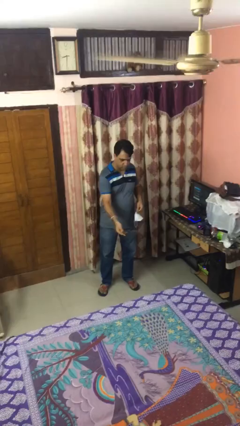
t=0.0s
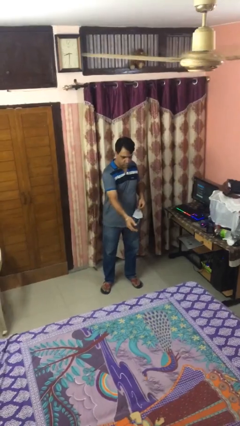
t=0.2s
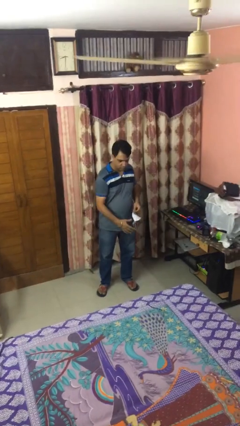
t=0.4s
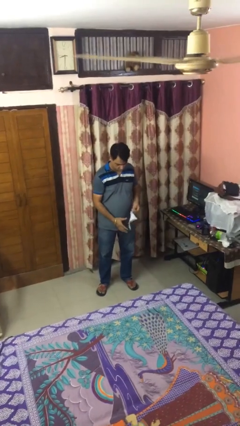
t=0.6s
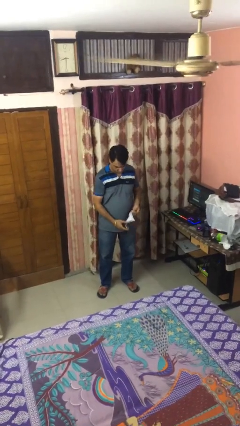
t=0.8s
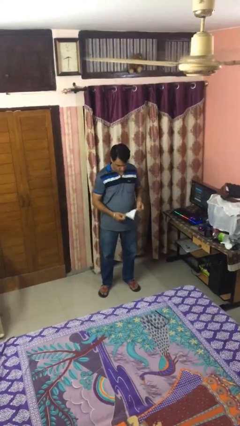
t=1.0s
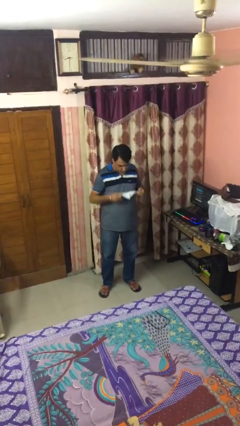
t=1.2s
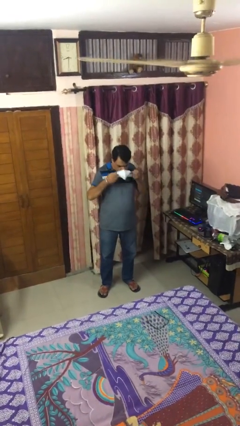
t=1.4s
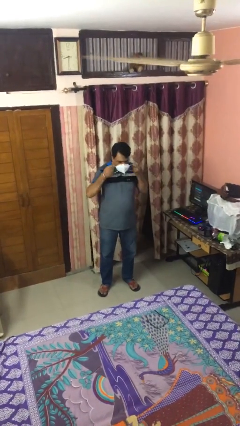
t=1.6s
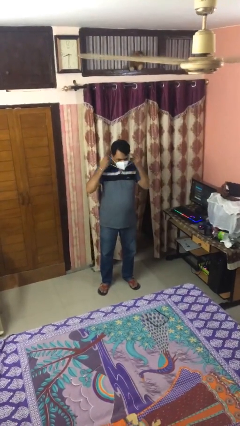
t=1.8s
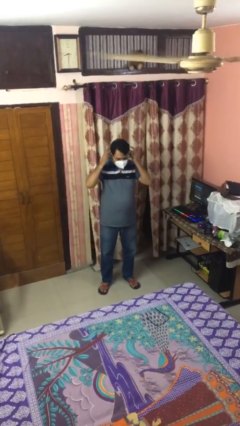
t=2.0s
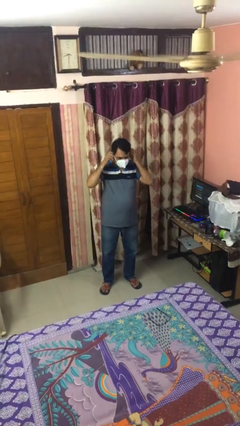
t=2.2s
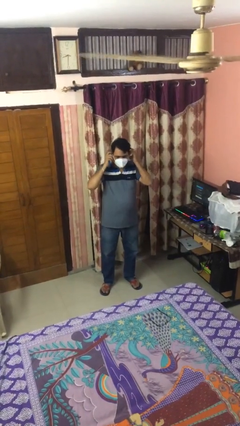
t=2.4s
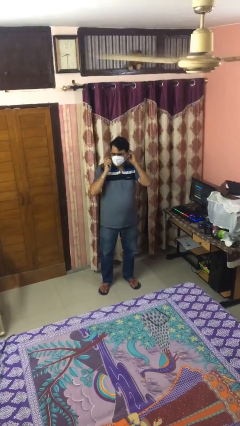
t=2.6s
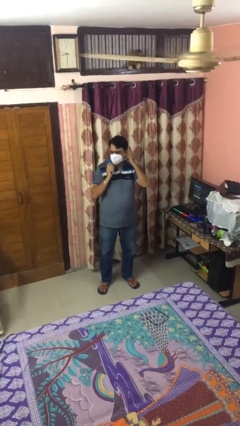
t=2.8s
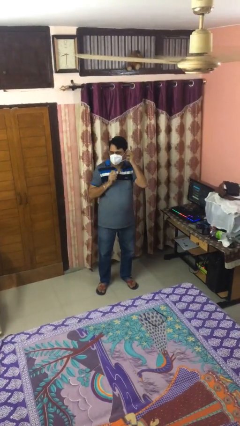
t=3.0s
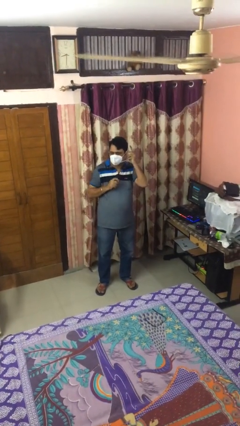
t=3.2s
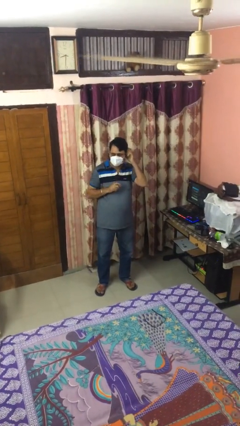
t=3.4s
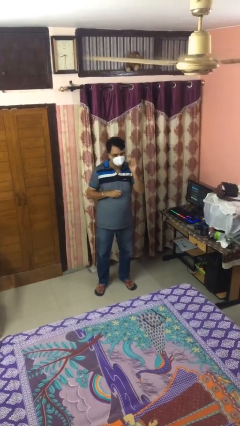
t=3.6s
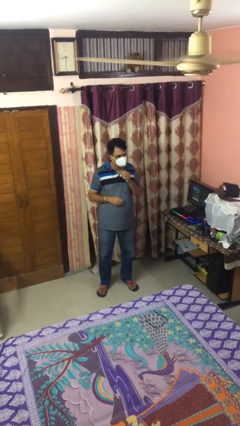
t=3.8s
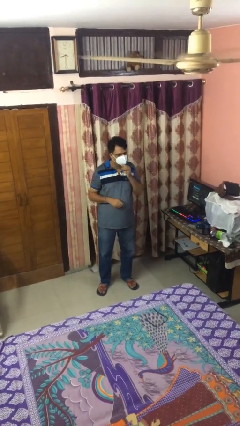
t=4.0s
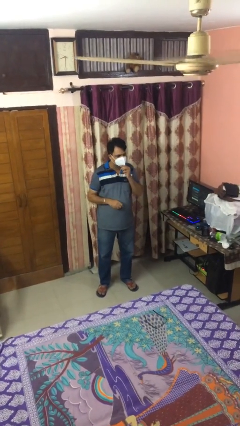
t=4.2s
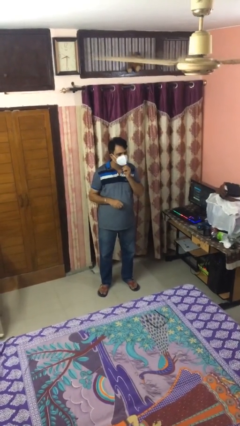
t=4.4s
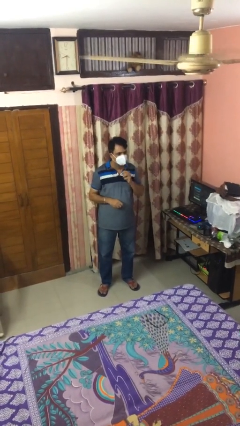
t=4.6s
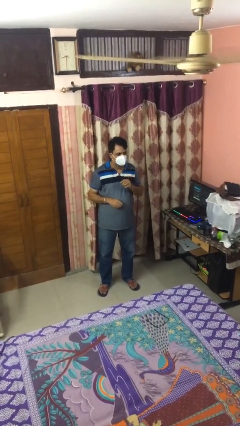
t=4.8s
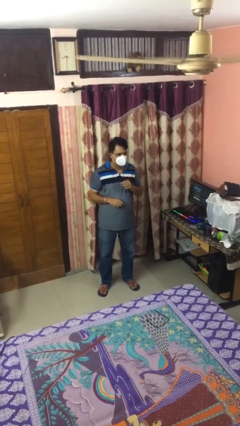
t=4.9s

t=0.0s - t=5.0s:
person puts on facemask

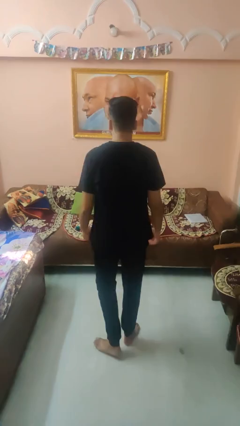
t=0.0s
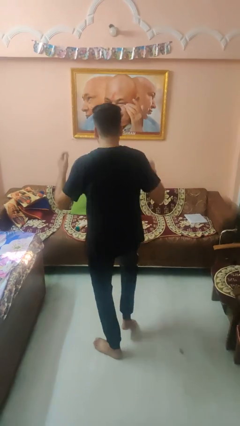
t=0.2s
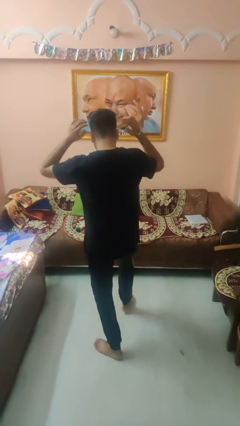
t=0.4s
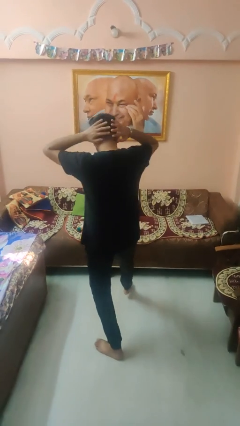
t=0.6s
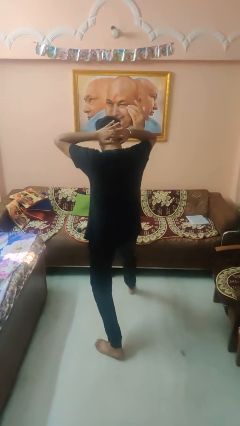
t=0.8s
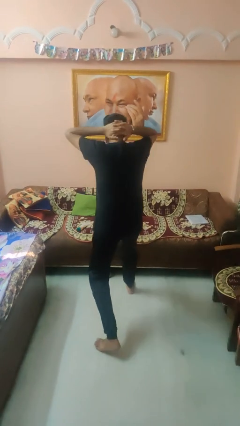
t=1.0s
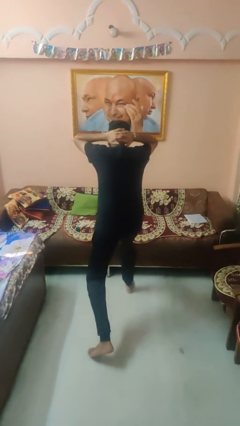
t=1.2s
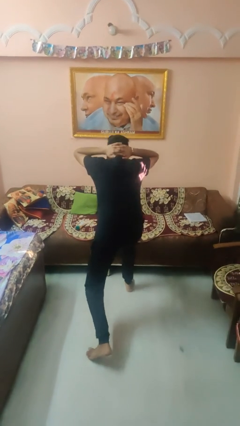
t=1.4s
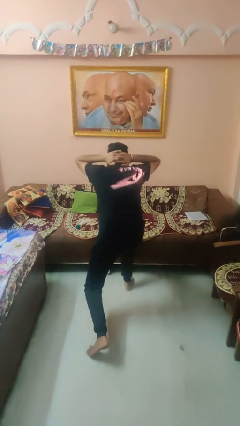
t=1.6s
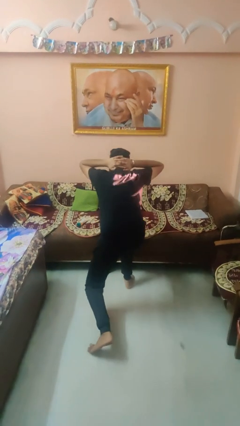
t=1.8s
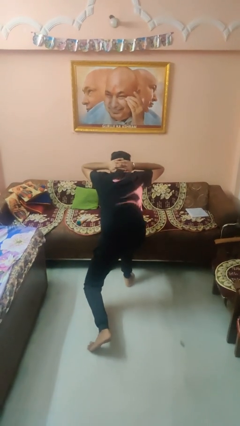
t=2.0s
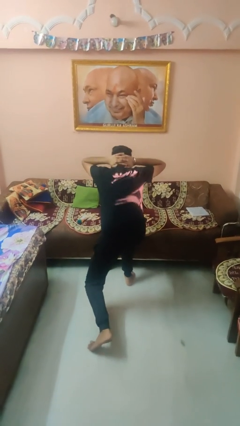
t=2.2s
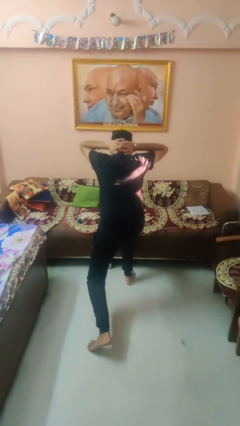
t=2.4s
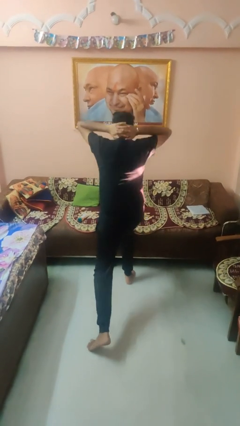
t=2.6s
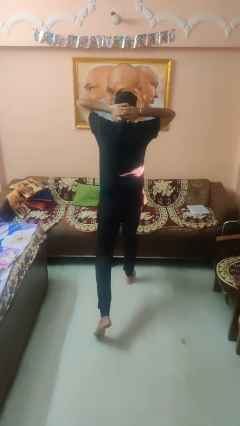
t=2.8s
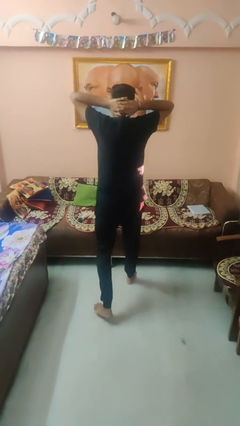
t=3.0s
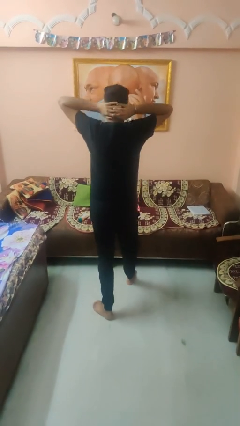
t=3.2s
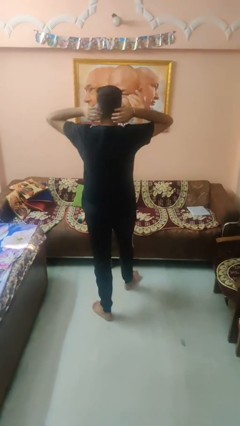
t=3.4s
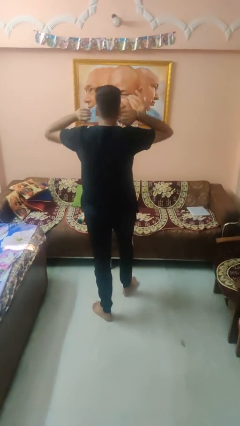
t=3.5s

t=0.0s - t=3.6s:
person exercises with lunges

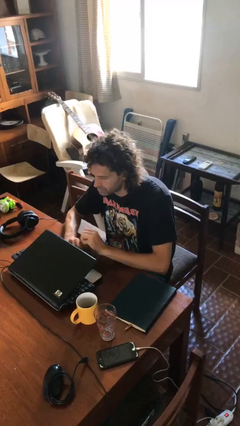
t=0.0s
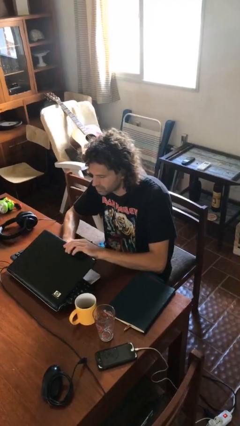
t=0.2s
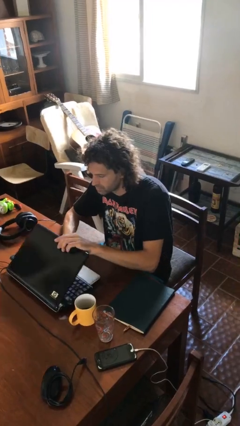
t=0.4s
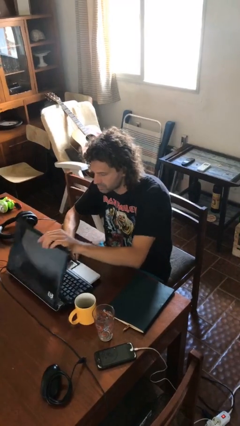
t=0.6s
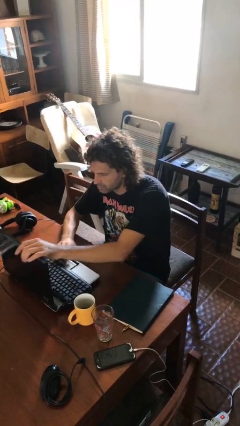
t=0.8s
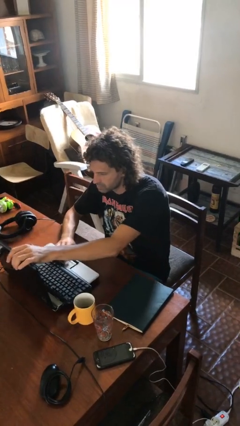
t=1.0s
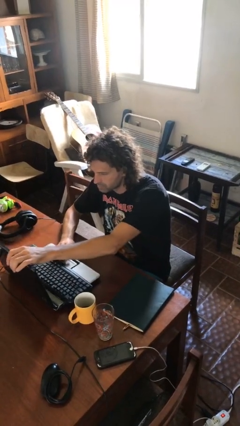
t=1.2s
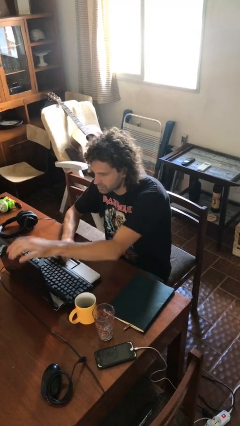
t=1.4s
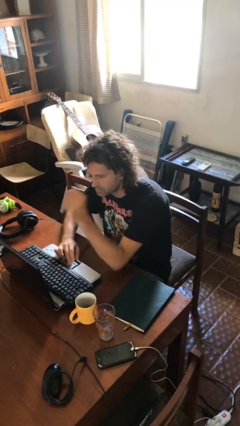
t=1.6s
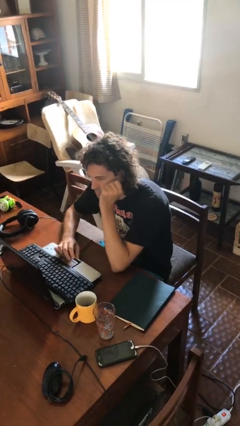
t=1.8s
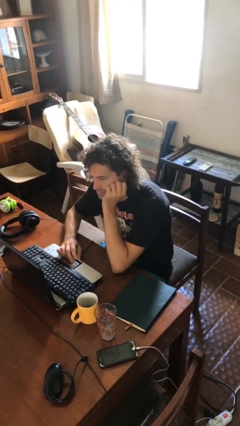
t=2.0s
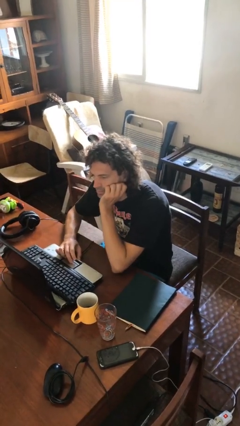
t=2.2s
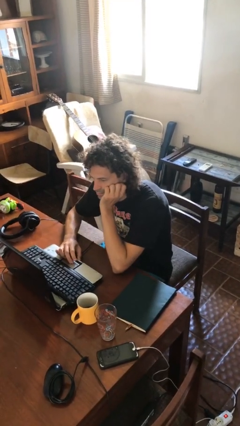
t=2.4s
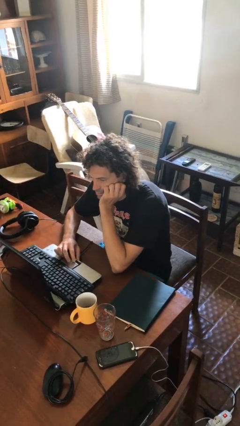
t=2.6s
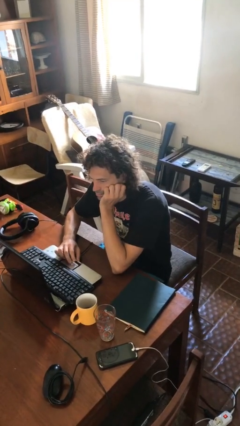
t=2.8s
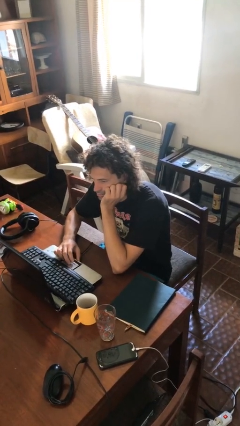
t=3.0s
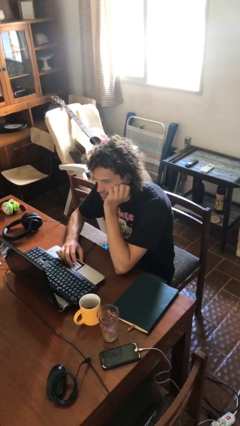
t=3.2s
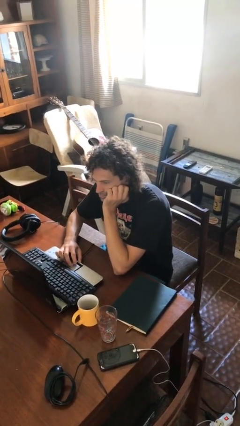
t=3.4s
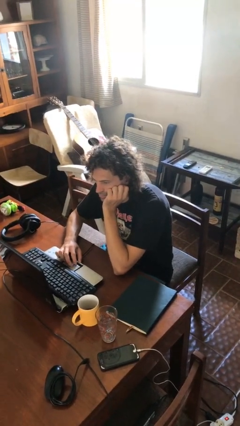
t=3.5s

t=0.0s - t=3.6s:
person interacts with laptop

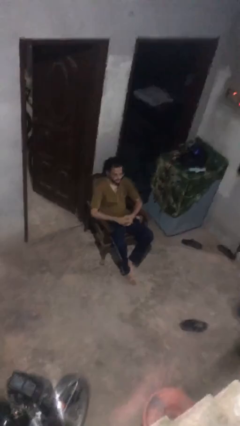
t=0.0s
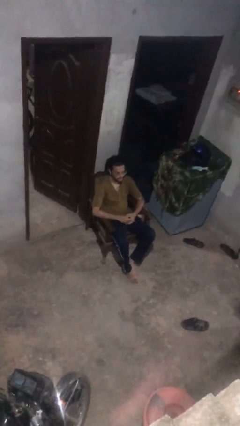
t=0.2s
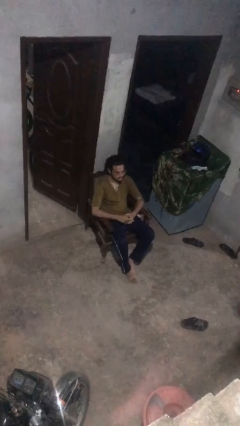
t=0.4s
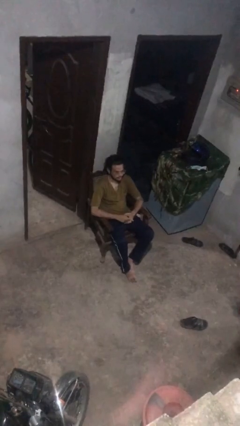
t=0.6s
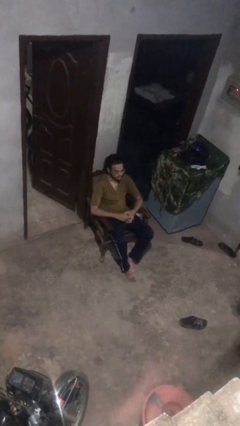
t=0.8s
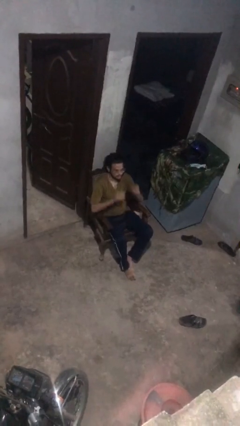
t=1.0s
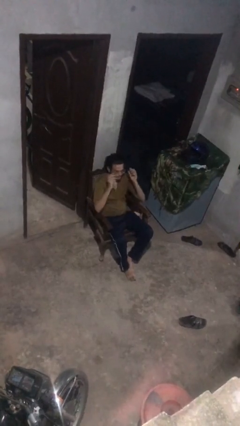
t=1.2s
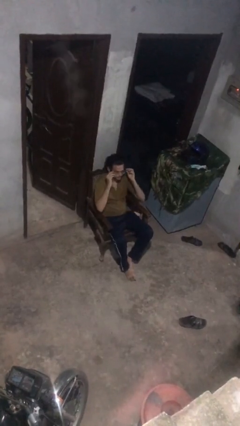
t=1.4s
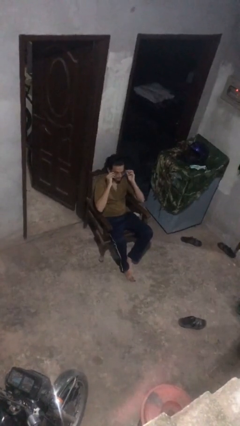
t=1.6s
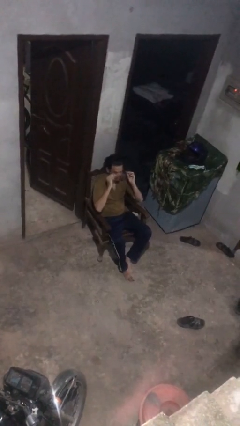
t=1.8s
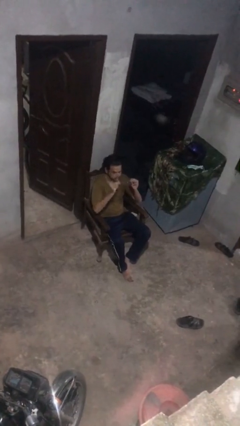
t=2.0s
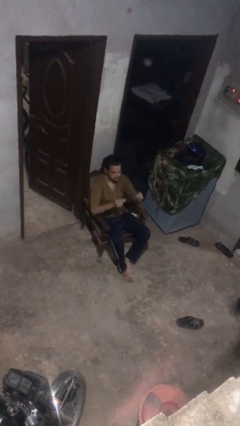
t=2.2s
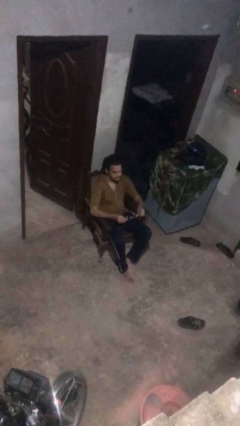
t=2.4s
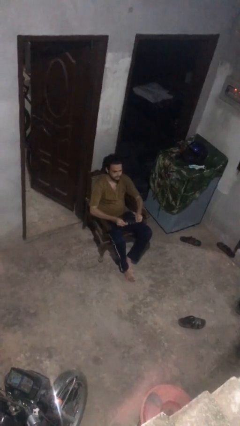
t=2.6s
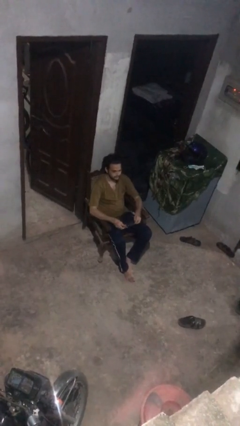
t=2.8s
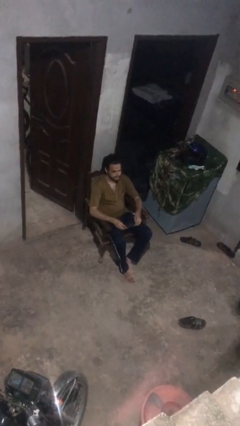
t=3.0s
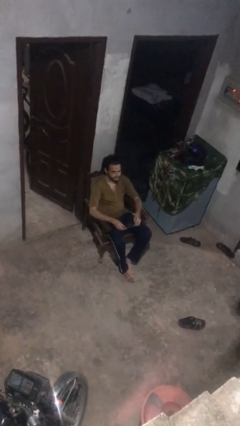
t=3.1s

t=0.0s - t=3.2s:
person takes off glasses

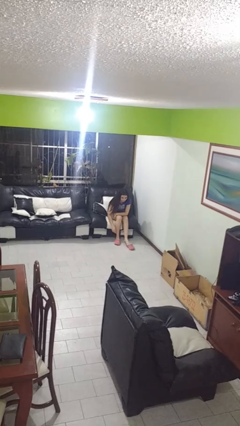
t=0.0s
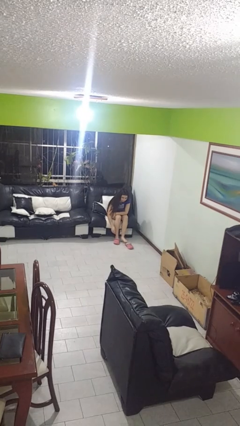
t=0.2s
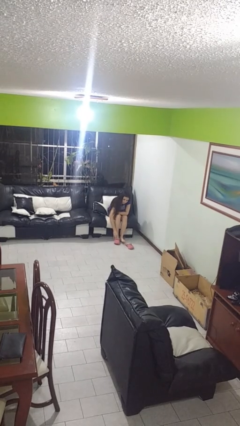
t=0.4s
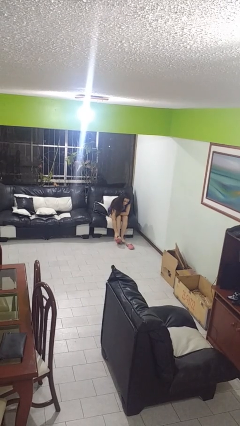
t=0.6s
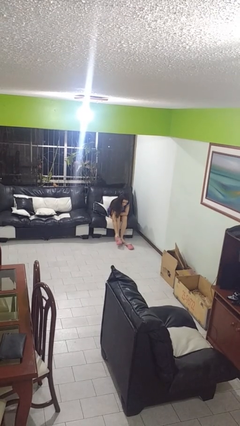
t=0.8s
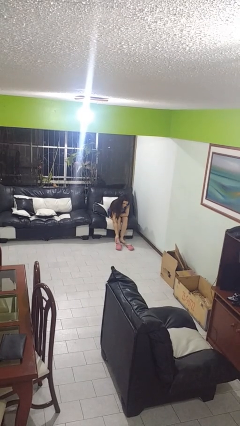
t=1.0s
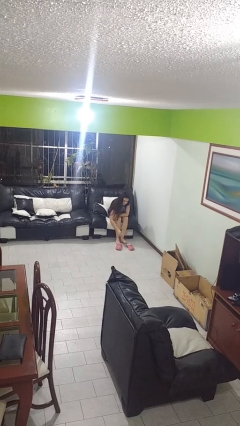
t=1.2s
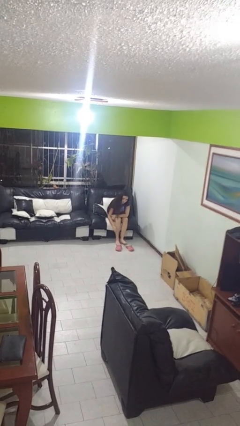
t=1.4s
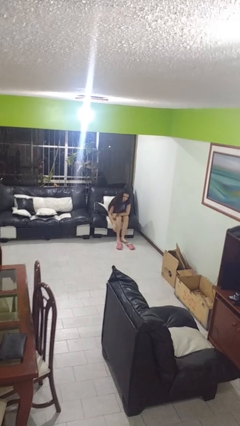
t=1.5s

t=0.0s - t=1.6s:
person takes off shoes

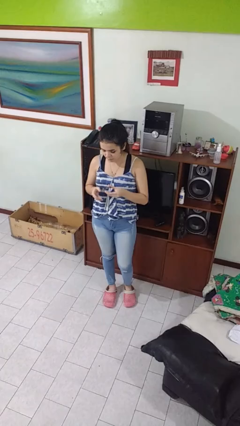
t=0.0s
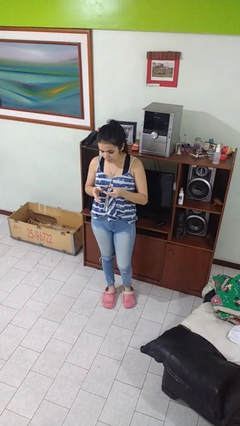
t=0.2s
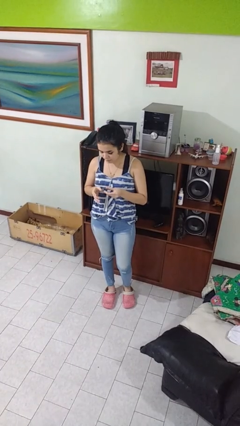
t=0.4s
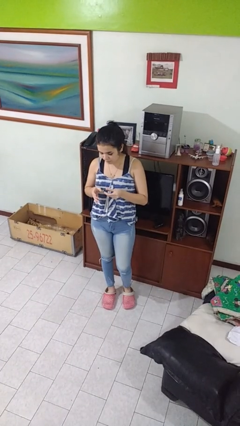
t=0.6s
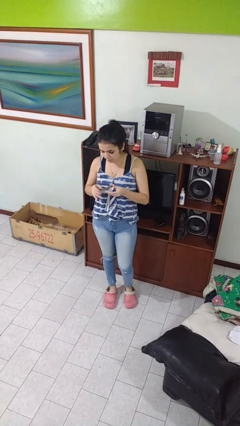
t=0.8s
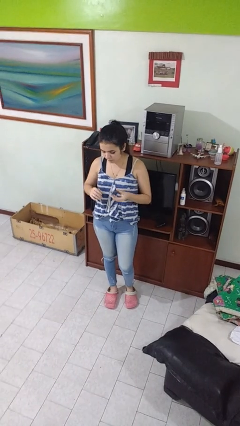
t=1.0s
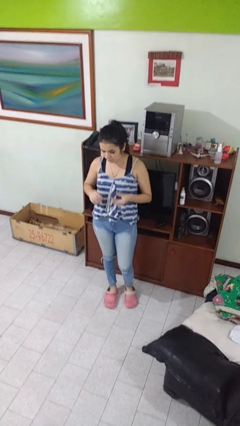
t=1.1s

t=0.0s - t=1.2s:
person clips fingernails
